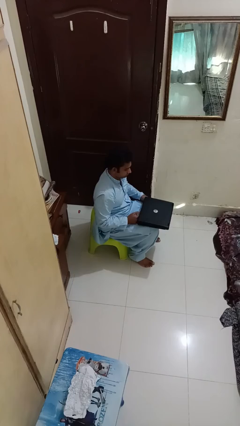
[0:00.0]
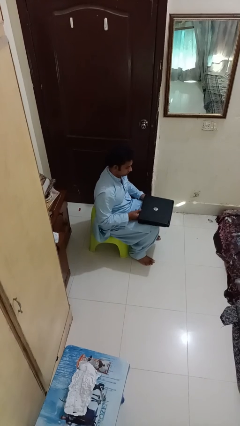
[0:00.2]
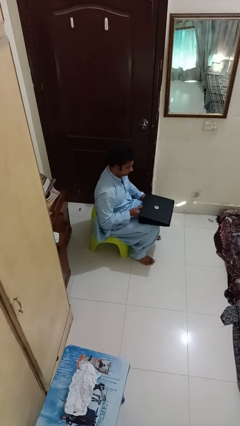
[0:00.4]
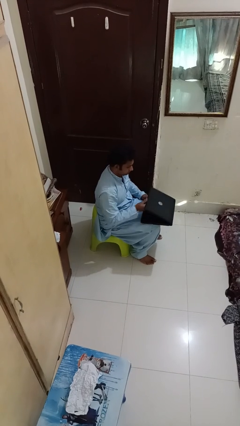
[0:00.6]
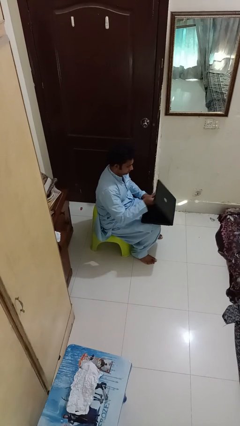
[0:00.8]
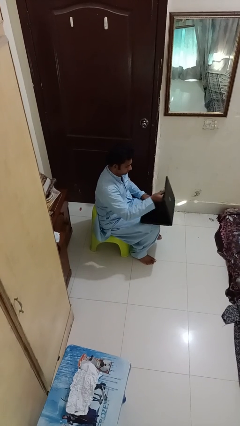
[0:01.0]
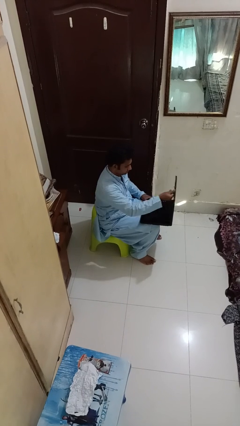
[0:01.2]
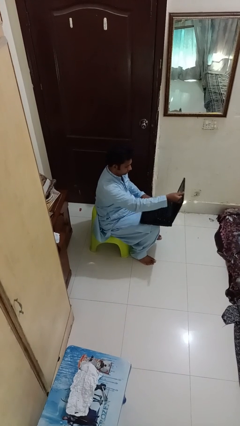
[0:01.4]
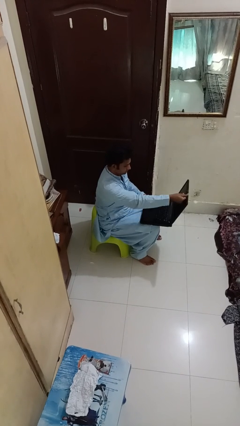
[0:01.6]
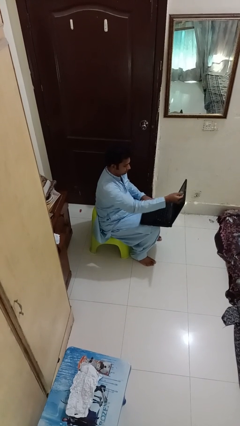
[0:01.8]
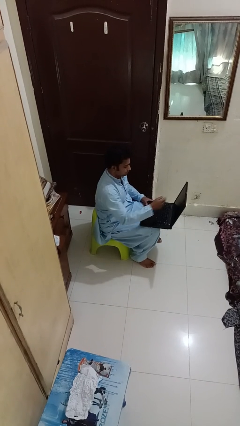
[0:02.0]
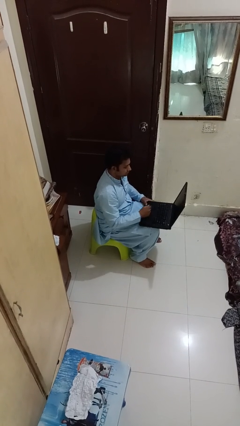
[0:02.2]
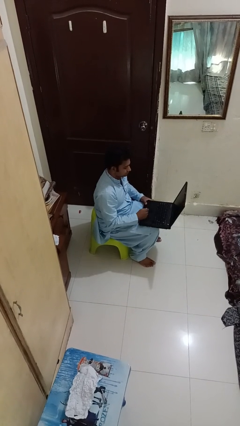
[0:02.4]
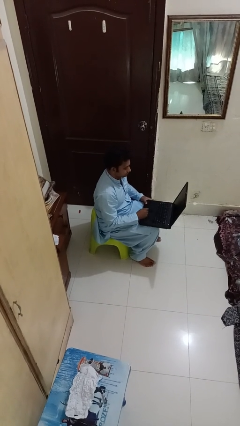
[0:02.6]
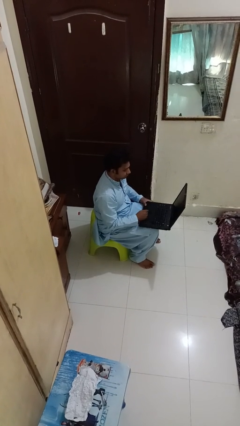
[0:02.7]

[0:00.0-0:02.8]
person opens laptop

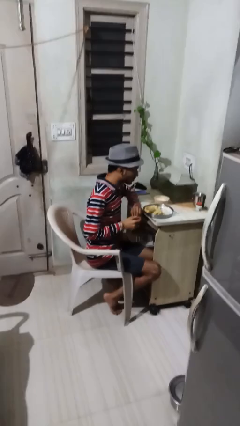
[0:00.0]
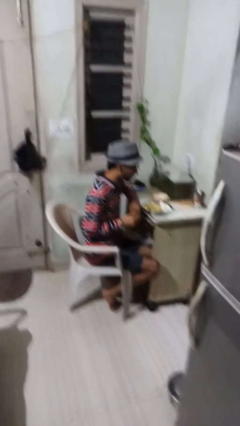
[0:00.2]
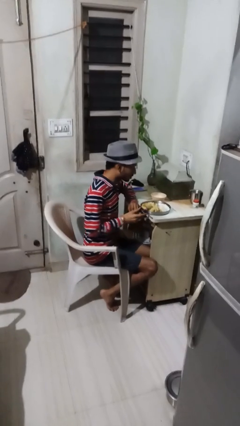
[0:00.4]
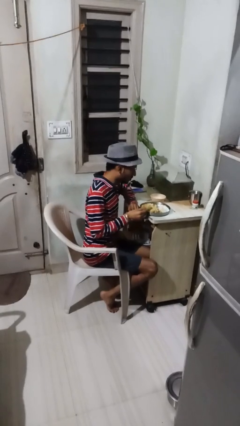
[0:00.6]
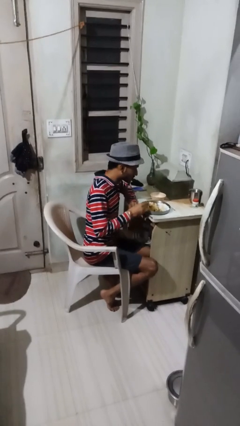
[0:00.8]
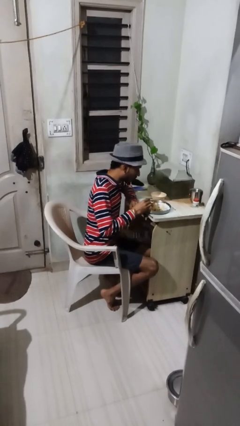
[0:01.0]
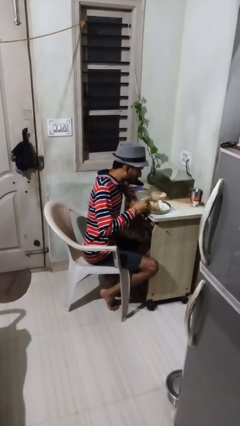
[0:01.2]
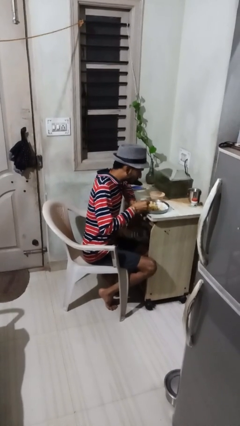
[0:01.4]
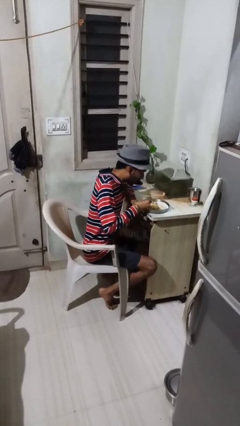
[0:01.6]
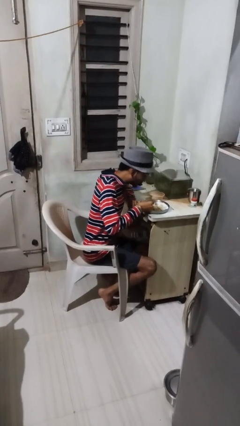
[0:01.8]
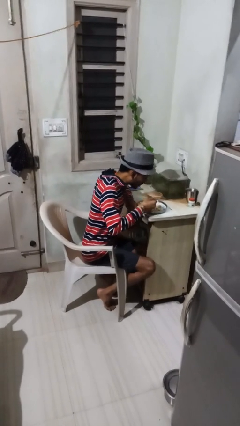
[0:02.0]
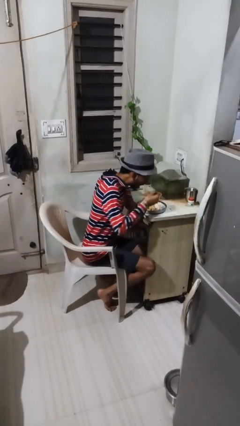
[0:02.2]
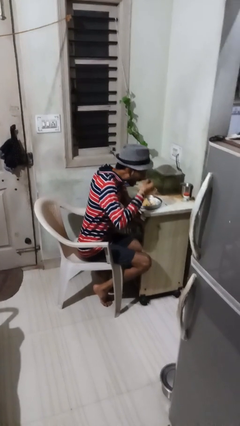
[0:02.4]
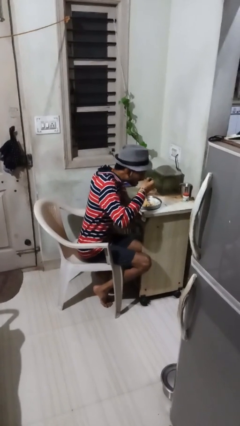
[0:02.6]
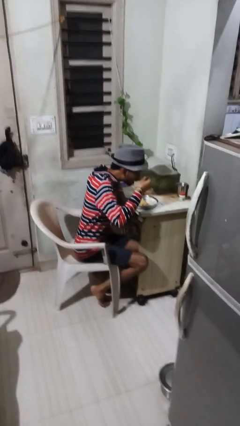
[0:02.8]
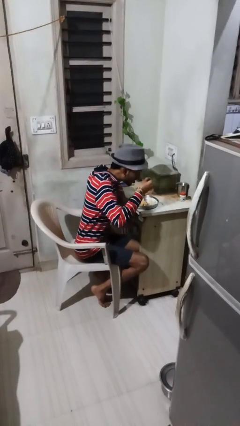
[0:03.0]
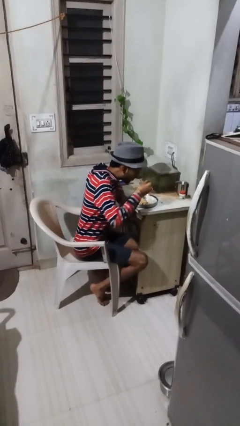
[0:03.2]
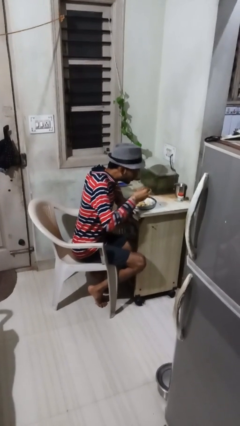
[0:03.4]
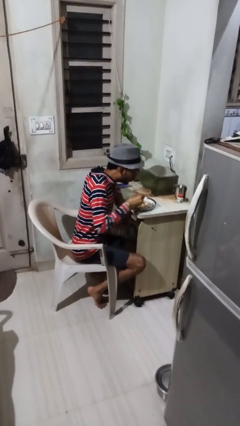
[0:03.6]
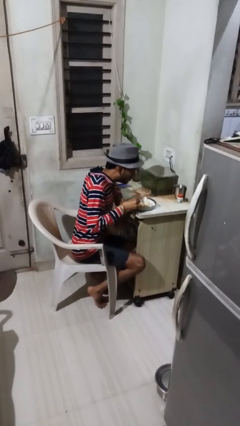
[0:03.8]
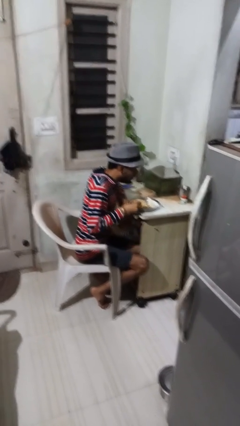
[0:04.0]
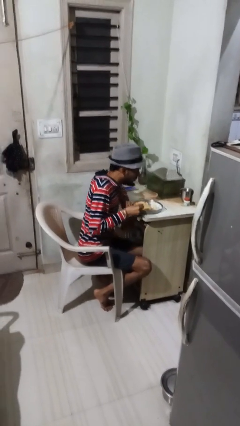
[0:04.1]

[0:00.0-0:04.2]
person eats with utensil

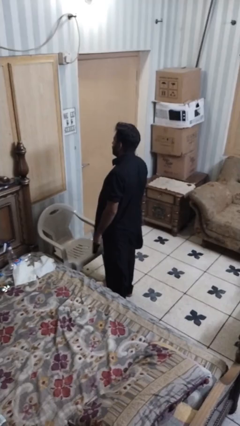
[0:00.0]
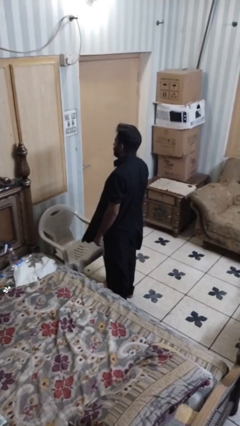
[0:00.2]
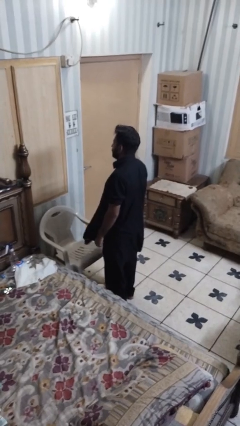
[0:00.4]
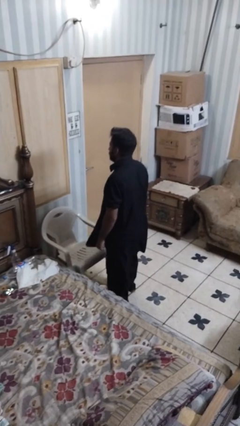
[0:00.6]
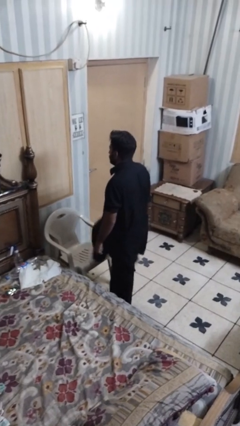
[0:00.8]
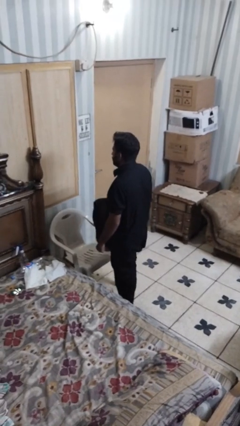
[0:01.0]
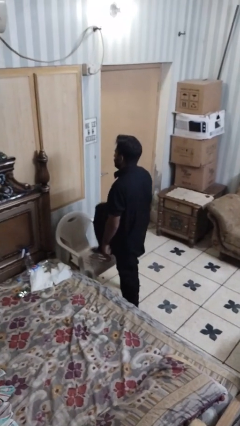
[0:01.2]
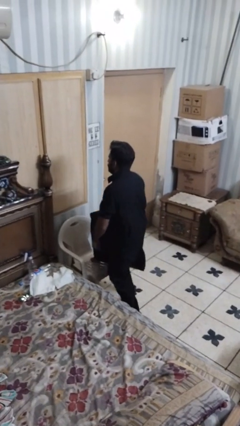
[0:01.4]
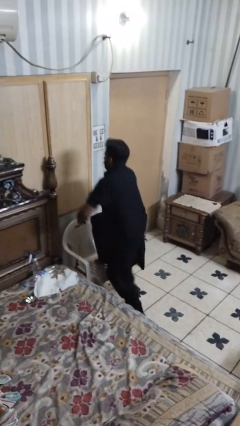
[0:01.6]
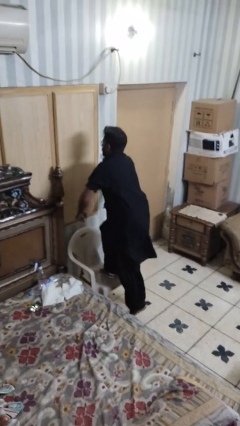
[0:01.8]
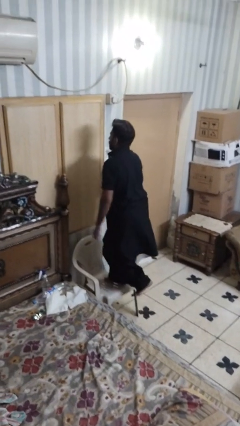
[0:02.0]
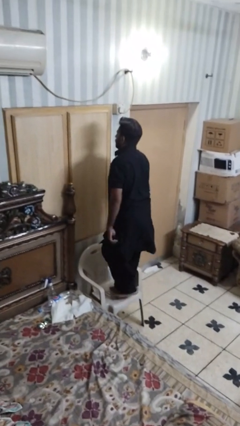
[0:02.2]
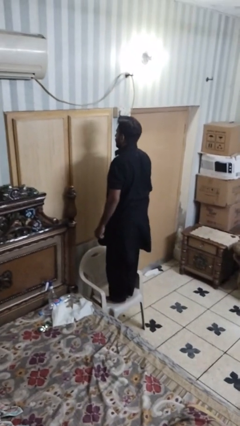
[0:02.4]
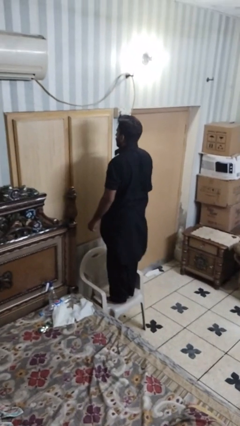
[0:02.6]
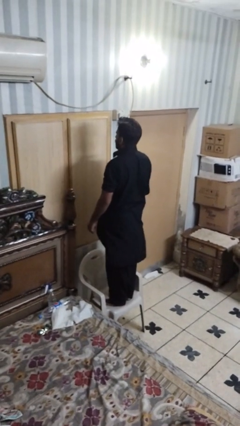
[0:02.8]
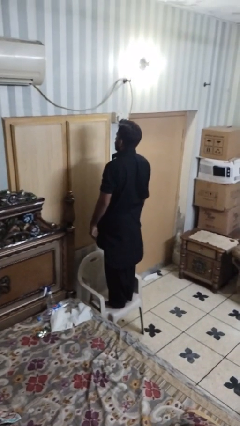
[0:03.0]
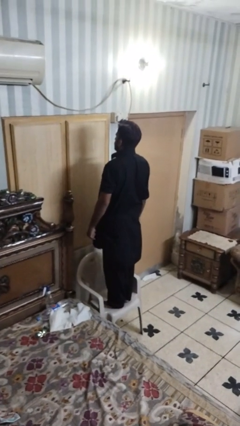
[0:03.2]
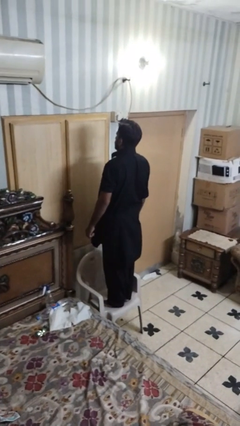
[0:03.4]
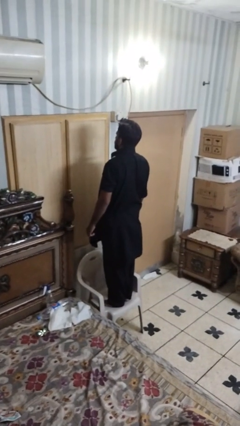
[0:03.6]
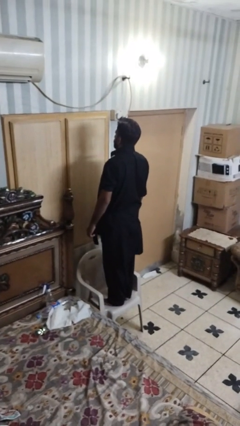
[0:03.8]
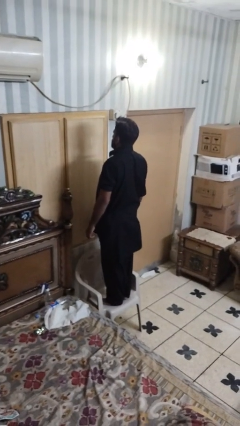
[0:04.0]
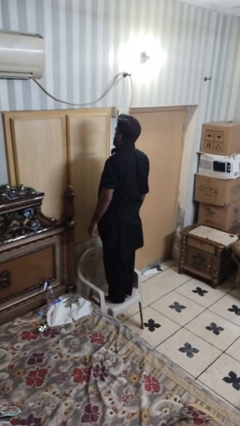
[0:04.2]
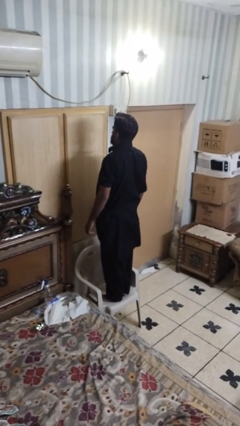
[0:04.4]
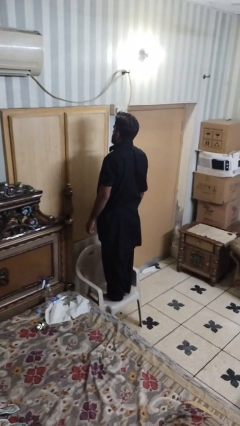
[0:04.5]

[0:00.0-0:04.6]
person climbs on chair

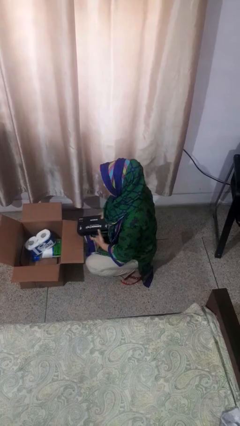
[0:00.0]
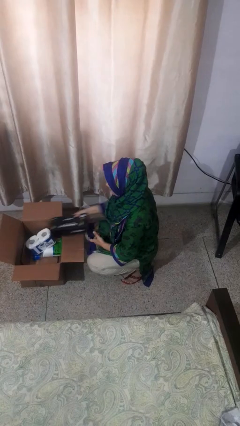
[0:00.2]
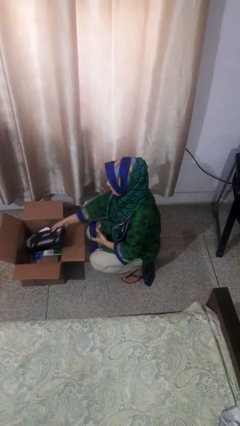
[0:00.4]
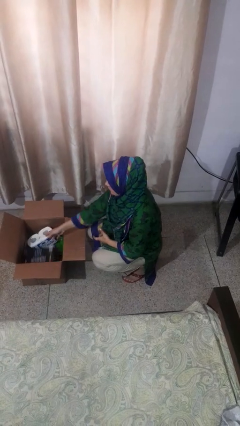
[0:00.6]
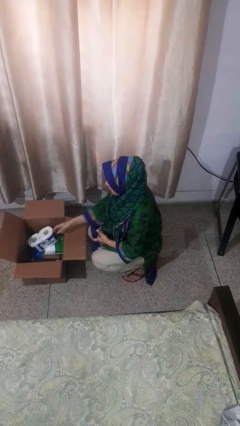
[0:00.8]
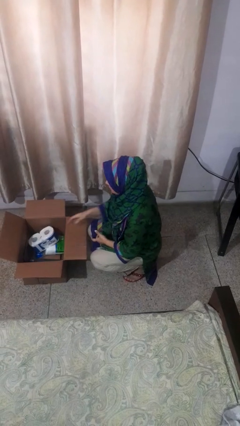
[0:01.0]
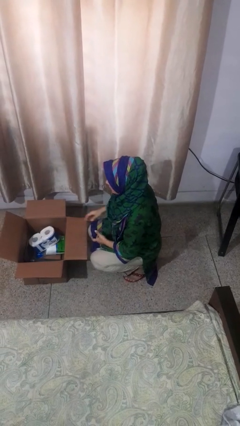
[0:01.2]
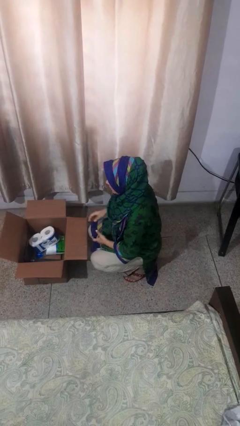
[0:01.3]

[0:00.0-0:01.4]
person puts object into box

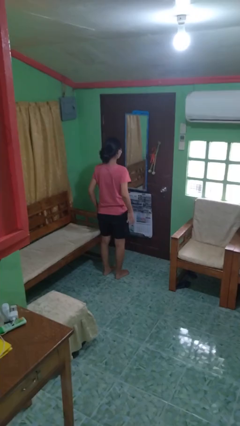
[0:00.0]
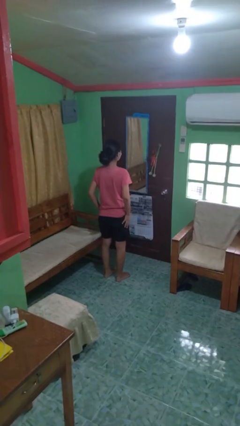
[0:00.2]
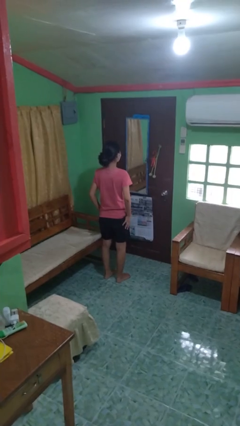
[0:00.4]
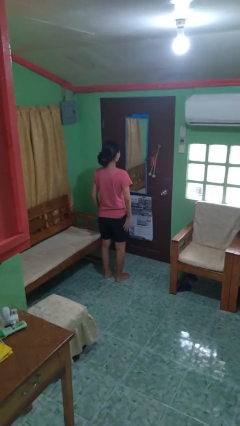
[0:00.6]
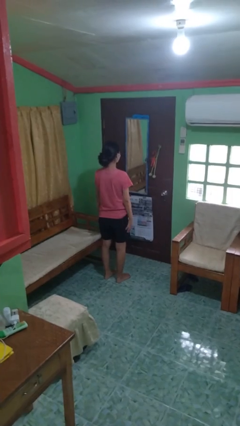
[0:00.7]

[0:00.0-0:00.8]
person slaps hands on thighs

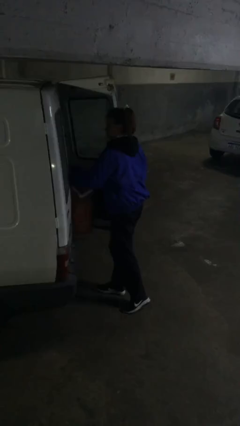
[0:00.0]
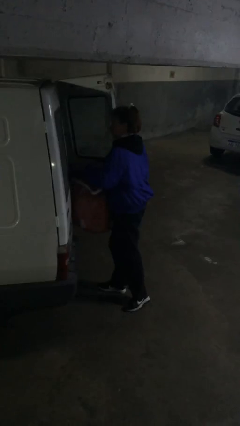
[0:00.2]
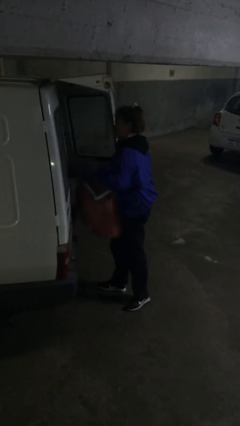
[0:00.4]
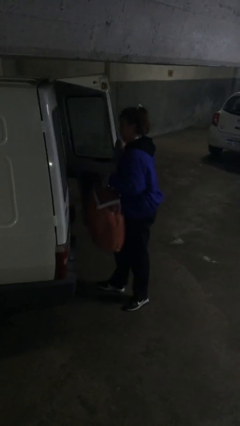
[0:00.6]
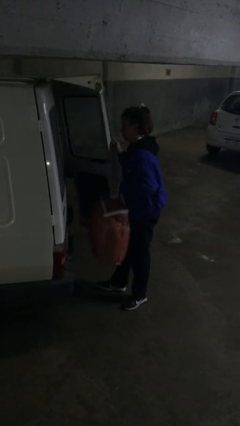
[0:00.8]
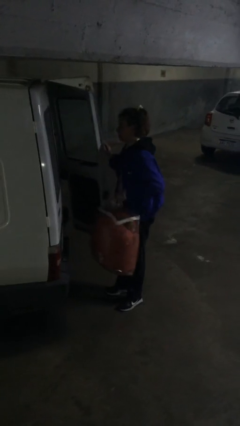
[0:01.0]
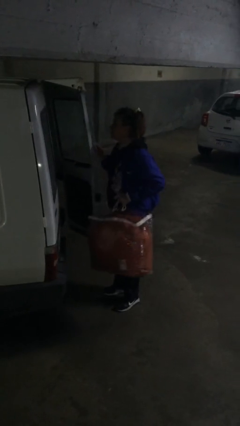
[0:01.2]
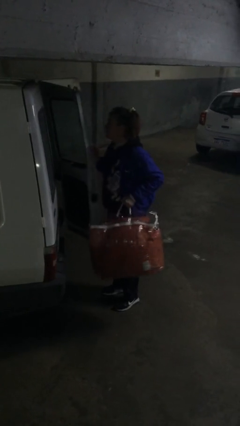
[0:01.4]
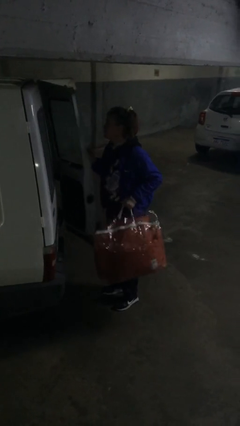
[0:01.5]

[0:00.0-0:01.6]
person unloads car

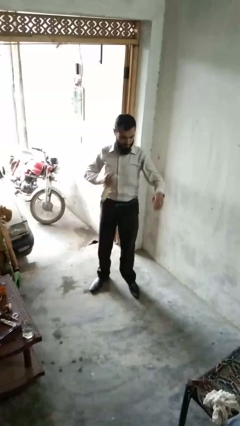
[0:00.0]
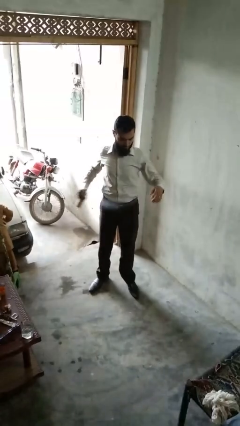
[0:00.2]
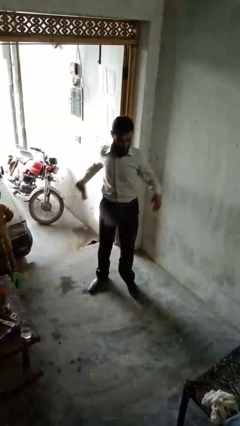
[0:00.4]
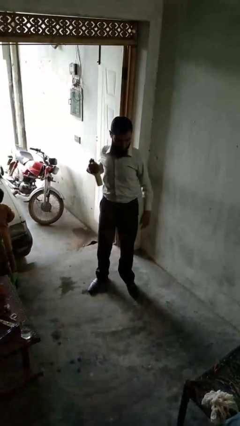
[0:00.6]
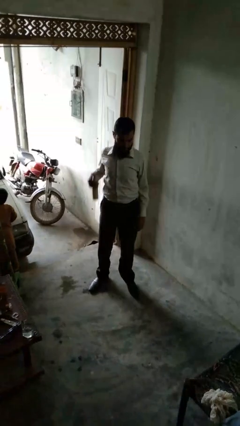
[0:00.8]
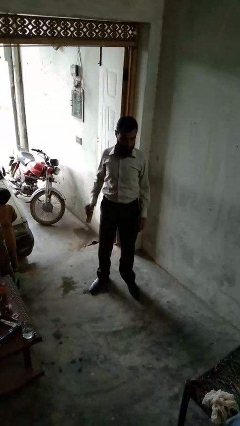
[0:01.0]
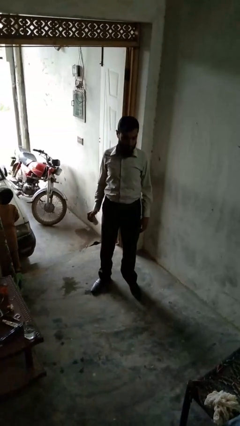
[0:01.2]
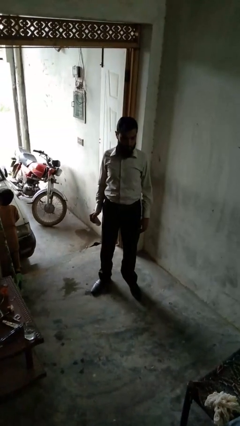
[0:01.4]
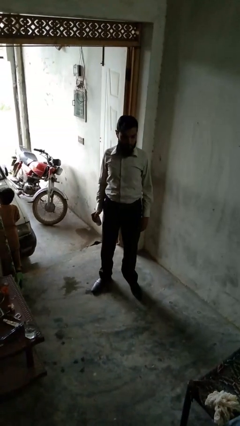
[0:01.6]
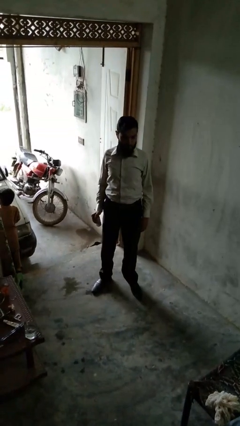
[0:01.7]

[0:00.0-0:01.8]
person applies deodorant
